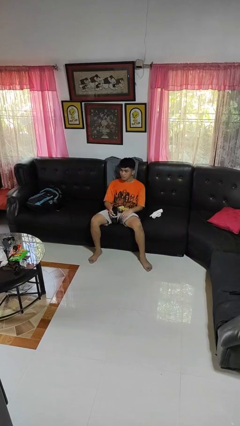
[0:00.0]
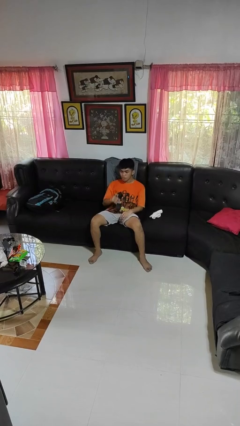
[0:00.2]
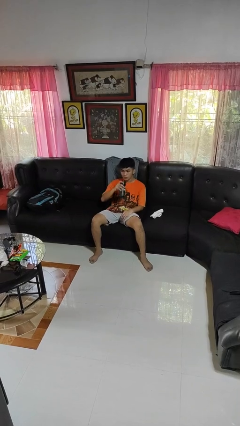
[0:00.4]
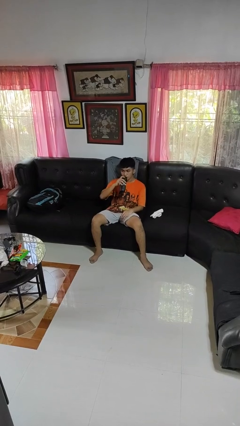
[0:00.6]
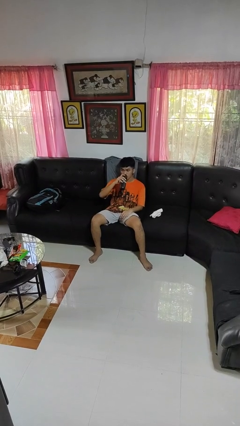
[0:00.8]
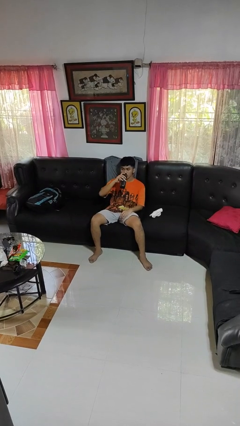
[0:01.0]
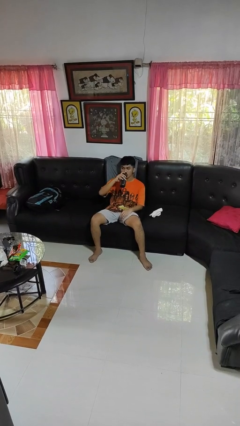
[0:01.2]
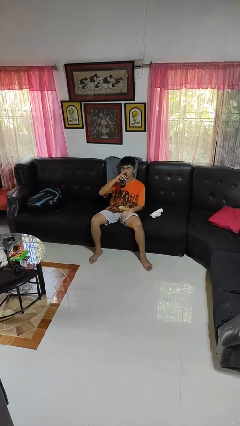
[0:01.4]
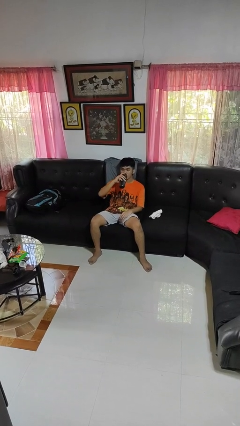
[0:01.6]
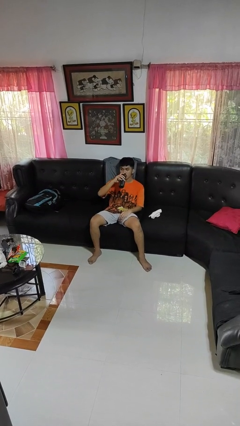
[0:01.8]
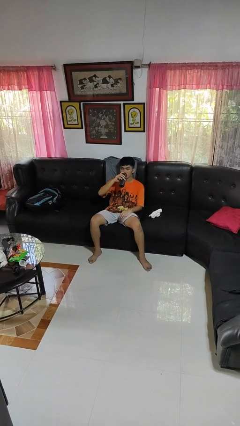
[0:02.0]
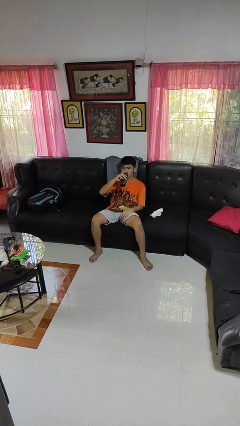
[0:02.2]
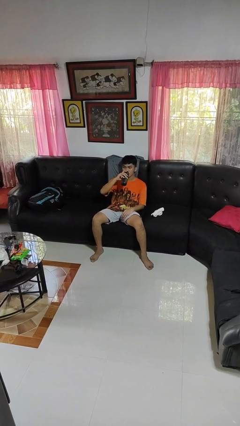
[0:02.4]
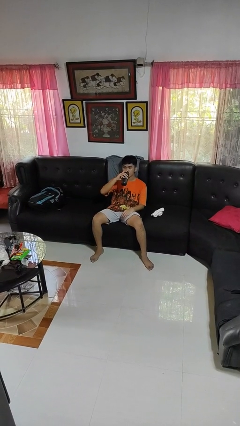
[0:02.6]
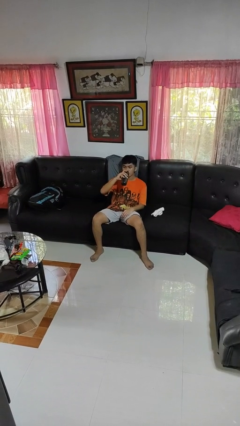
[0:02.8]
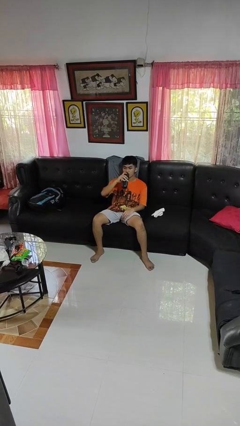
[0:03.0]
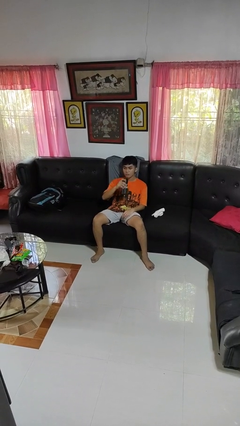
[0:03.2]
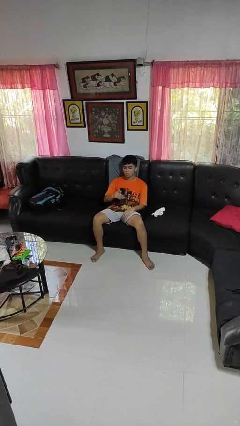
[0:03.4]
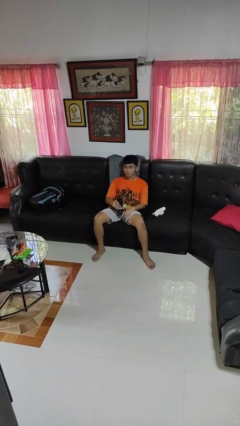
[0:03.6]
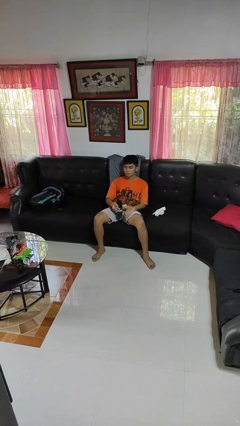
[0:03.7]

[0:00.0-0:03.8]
person drinks from bottle

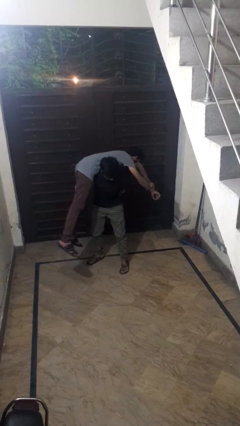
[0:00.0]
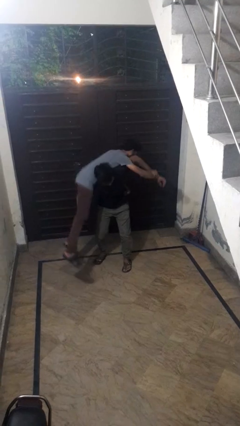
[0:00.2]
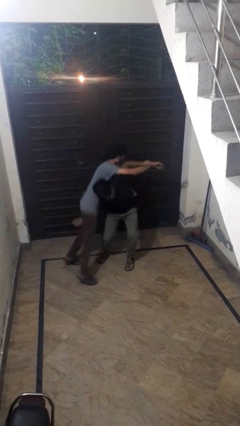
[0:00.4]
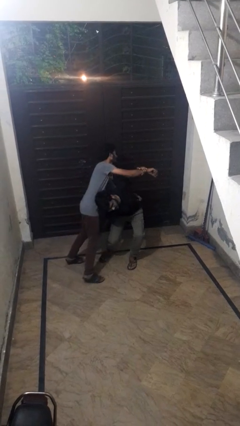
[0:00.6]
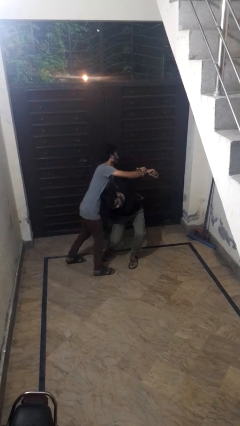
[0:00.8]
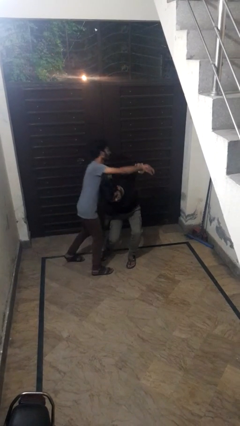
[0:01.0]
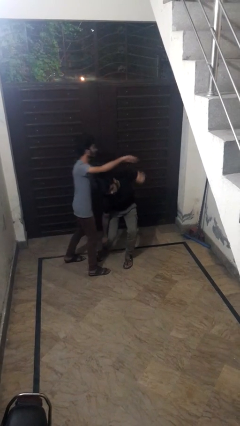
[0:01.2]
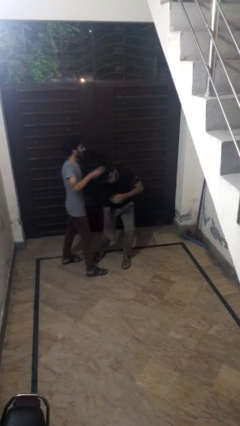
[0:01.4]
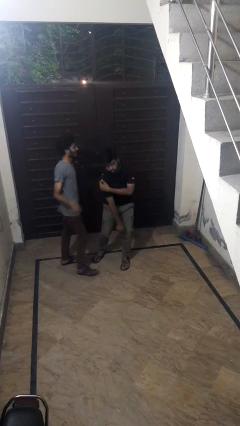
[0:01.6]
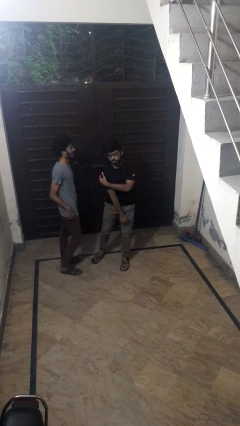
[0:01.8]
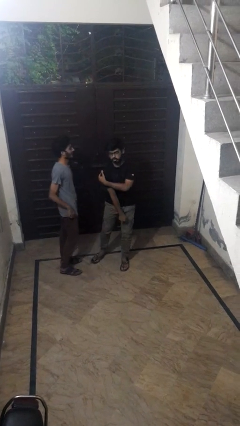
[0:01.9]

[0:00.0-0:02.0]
person puts down person

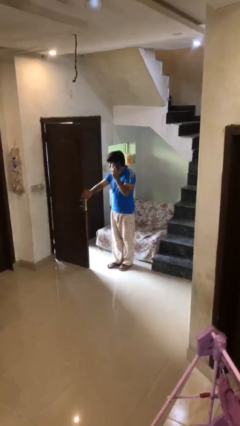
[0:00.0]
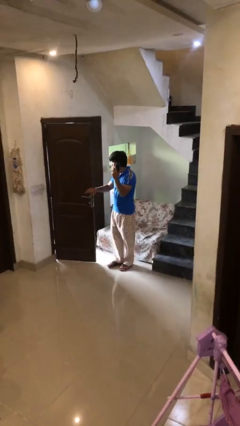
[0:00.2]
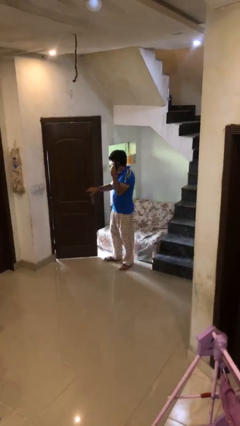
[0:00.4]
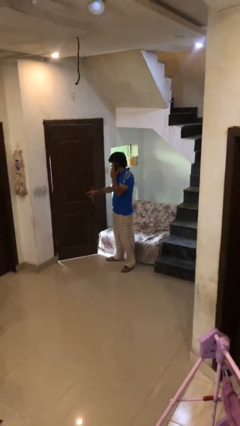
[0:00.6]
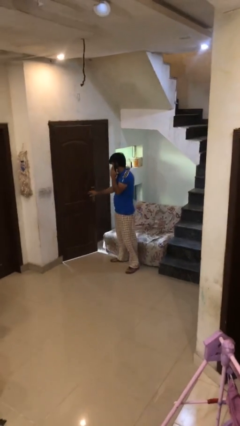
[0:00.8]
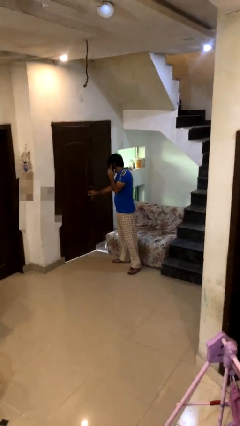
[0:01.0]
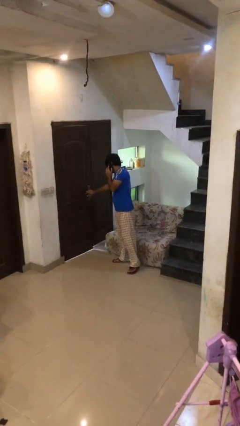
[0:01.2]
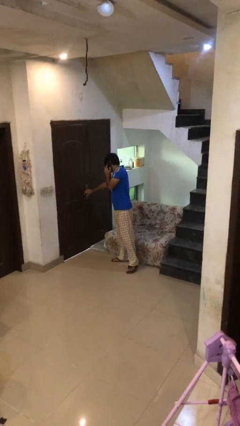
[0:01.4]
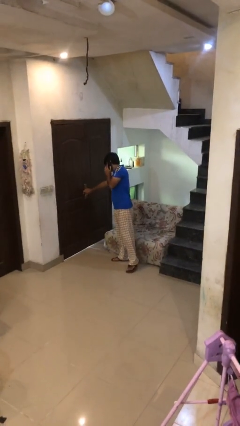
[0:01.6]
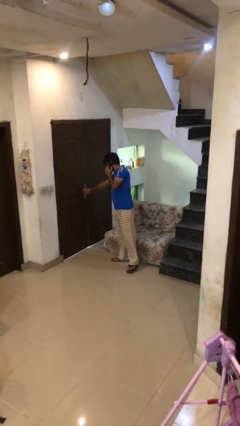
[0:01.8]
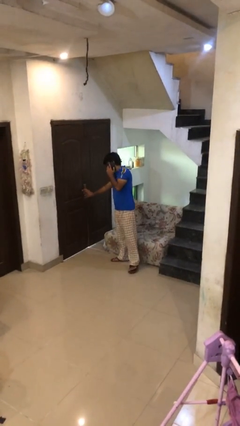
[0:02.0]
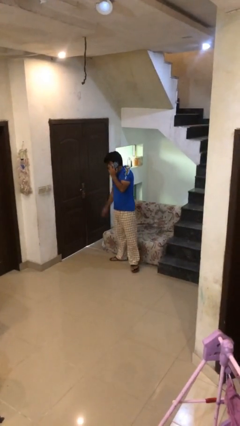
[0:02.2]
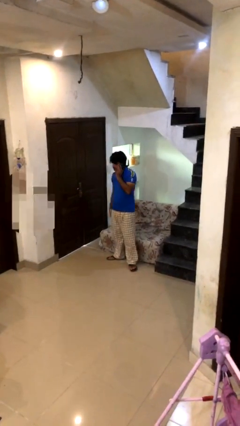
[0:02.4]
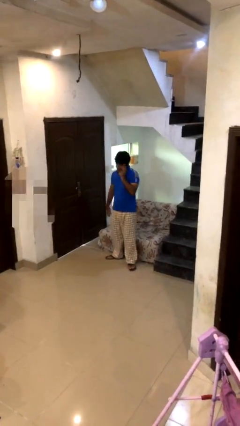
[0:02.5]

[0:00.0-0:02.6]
person closes facility door

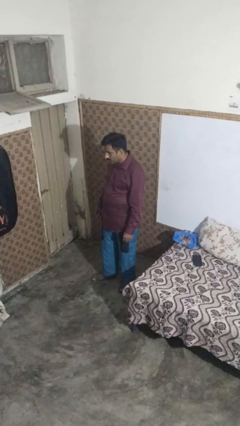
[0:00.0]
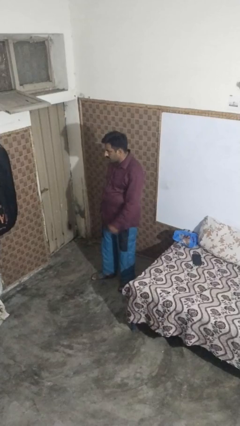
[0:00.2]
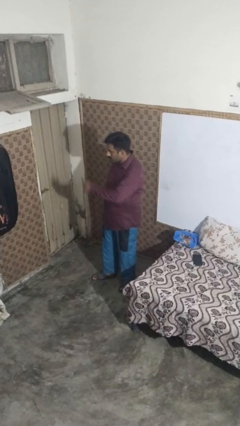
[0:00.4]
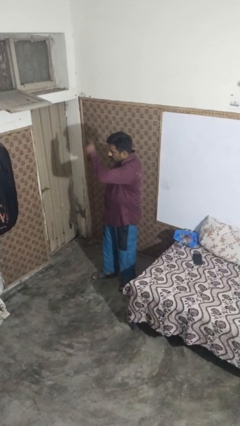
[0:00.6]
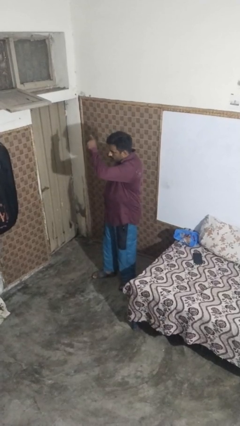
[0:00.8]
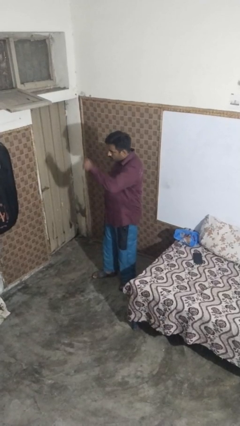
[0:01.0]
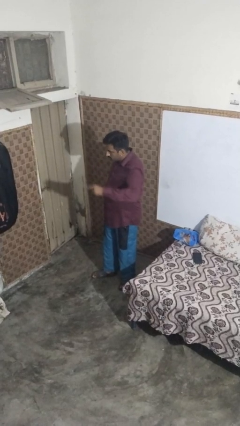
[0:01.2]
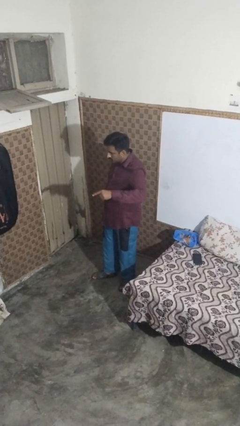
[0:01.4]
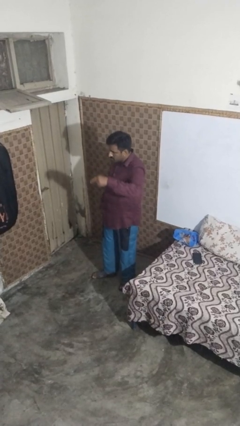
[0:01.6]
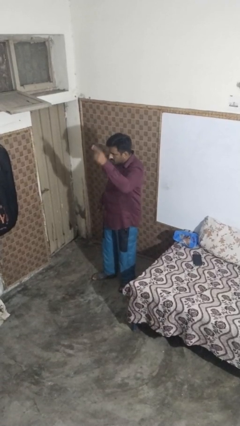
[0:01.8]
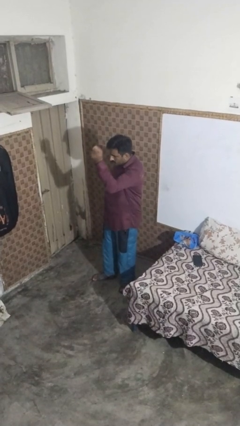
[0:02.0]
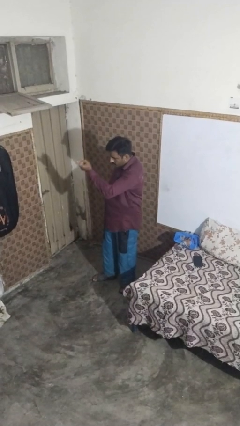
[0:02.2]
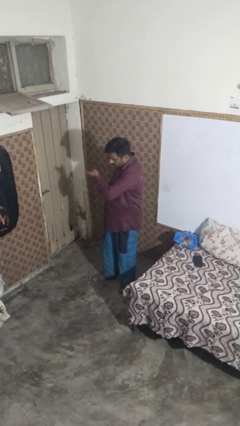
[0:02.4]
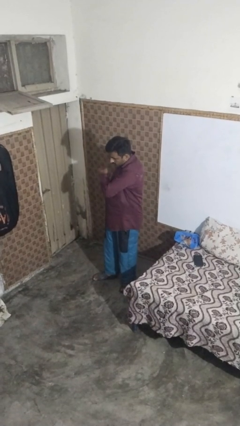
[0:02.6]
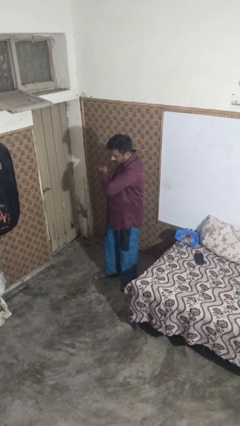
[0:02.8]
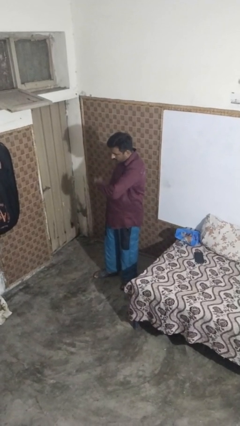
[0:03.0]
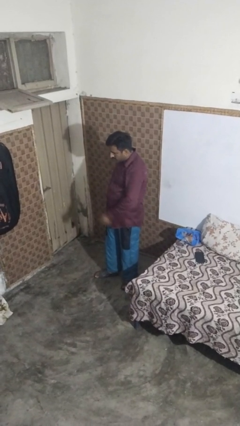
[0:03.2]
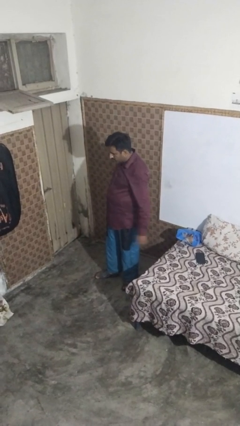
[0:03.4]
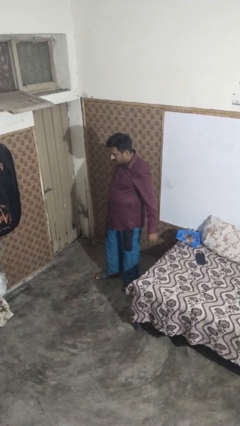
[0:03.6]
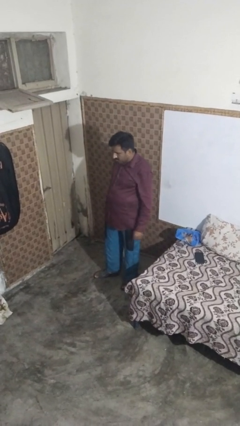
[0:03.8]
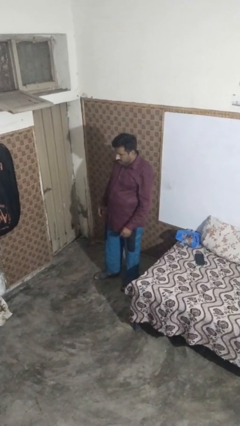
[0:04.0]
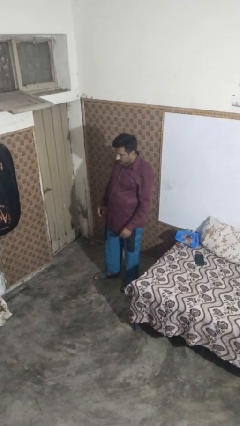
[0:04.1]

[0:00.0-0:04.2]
person gestures cut

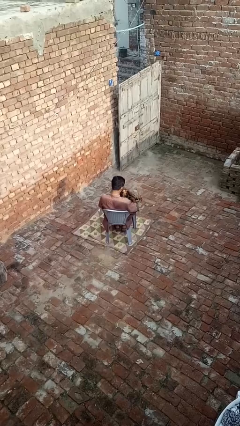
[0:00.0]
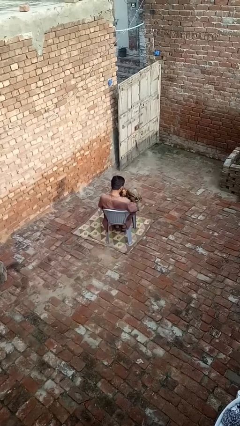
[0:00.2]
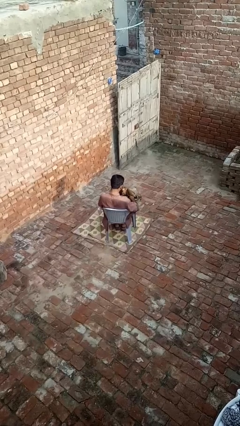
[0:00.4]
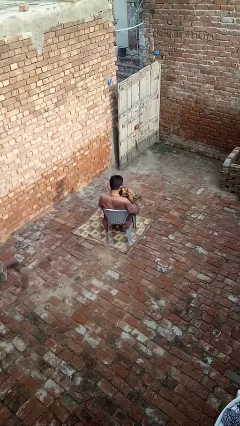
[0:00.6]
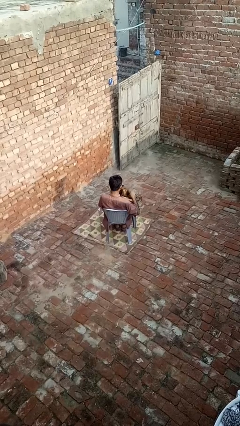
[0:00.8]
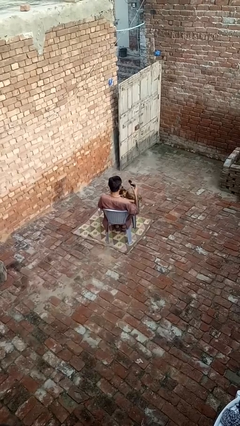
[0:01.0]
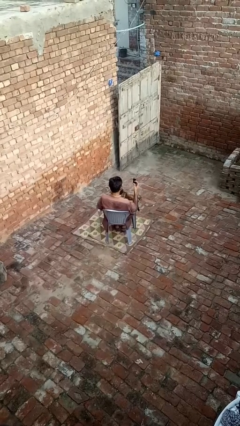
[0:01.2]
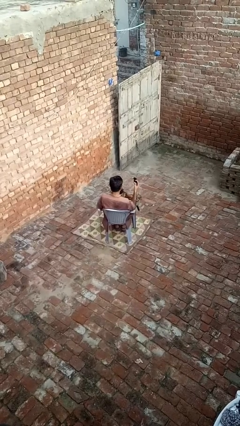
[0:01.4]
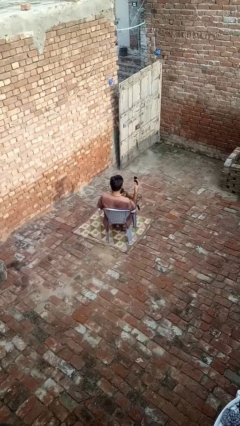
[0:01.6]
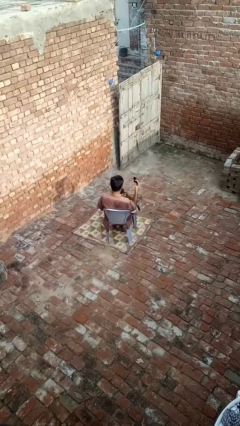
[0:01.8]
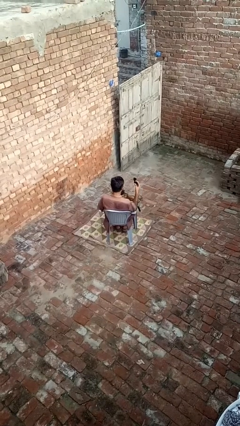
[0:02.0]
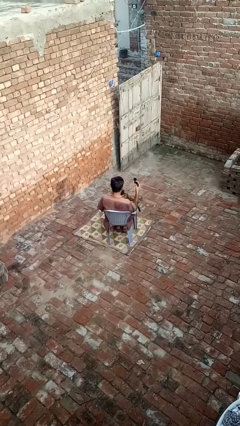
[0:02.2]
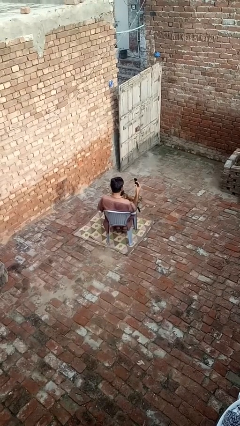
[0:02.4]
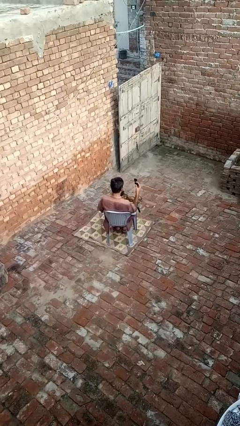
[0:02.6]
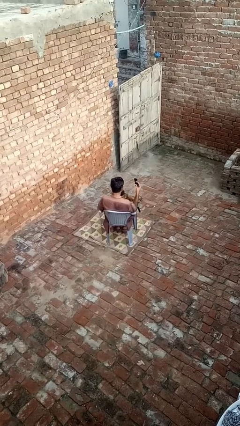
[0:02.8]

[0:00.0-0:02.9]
person takes object from purse

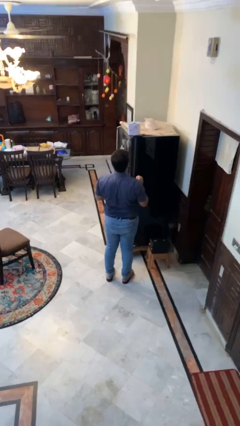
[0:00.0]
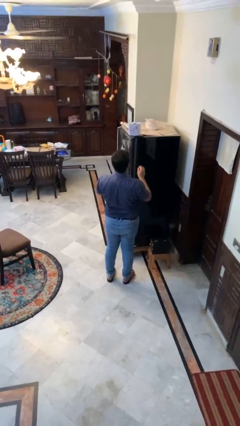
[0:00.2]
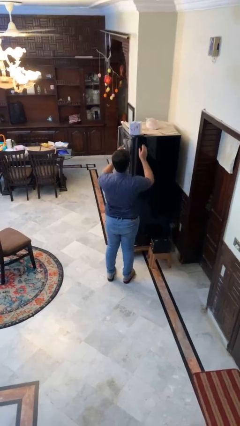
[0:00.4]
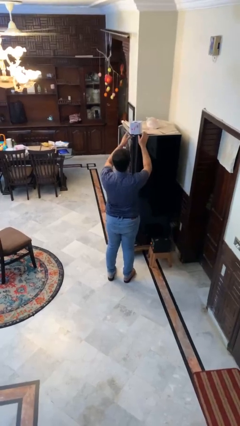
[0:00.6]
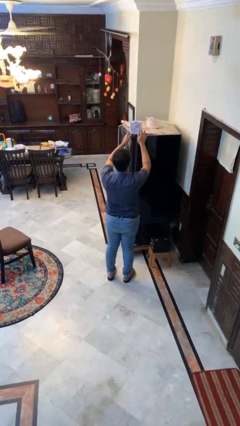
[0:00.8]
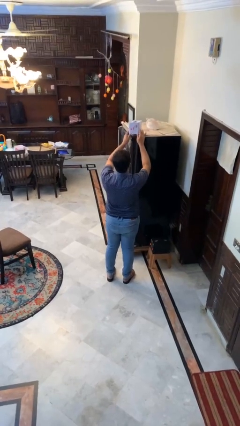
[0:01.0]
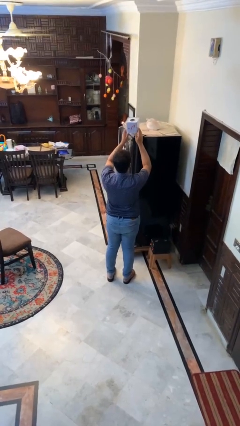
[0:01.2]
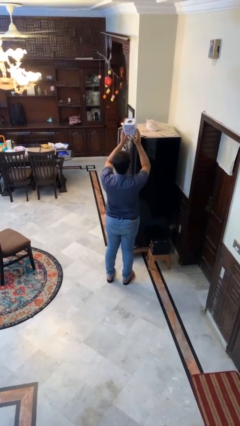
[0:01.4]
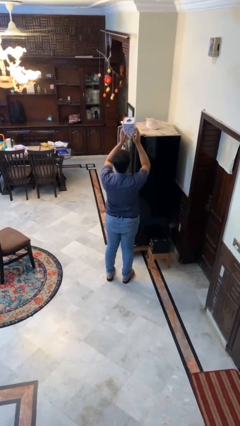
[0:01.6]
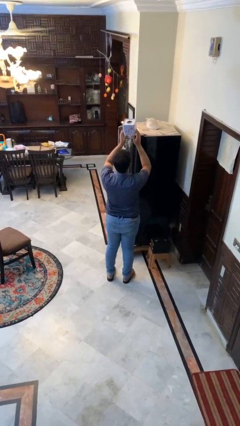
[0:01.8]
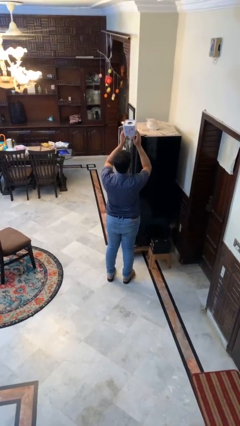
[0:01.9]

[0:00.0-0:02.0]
person picks up object from shelf
